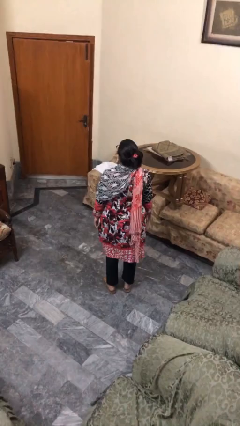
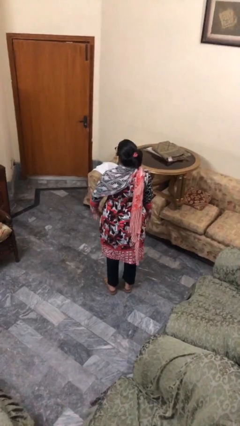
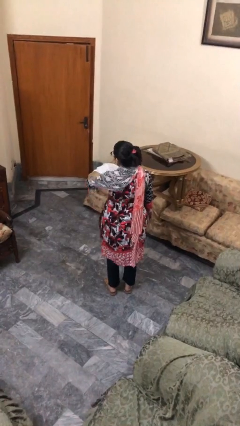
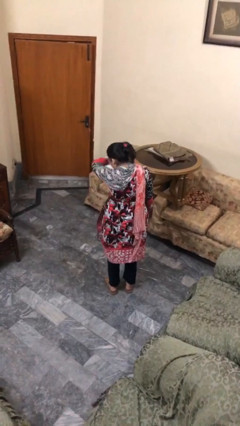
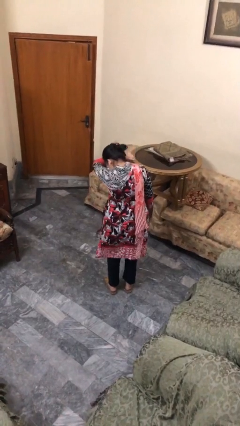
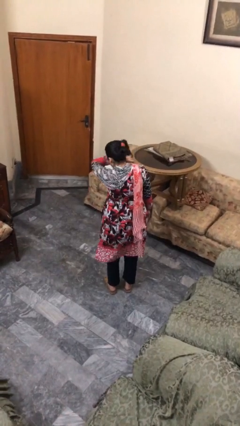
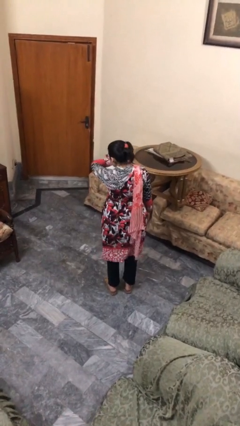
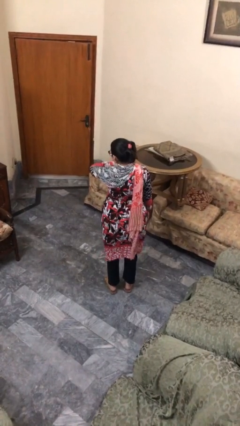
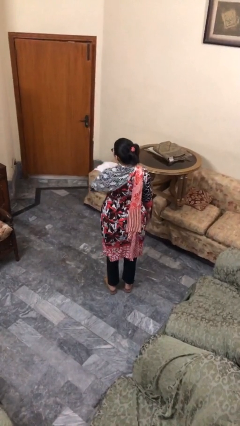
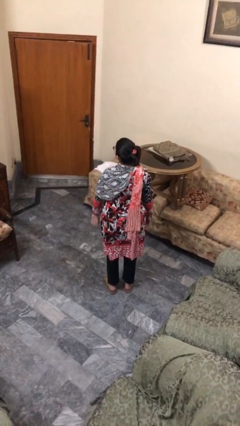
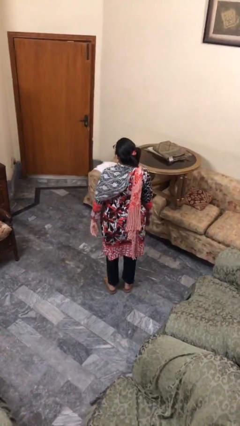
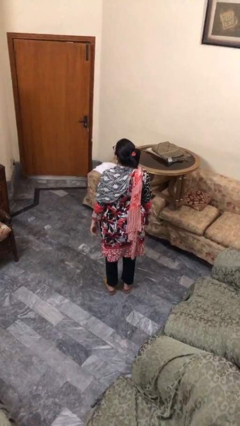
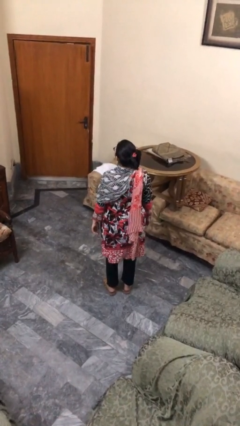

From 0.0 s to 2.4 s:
person sneezes into arm

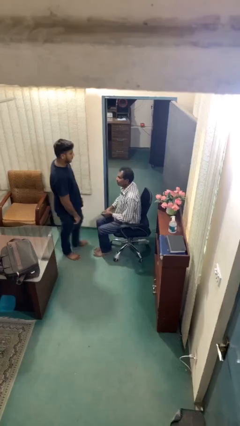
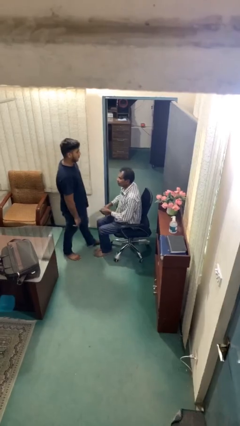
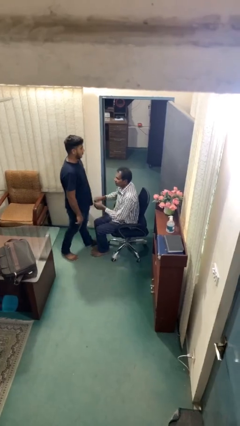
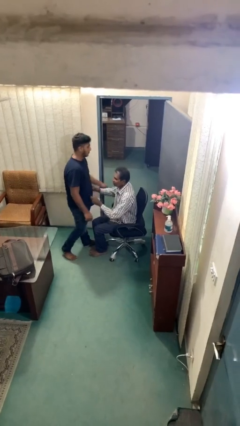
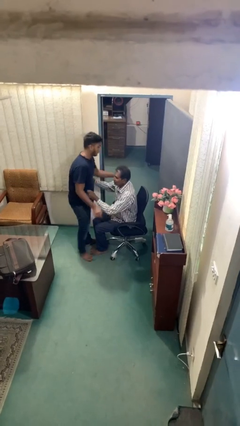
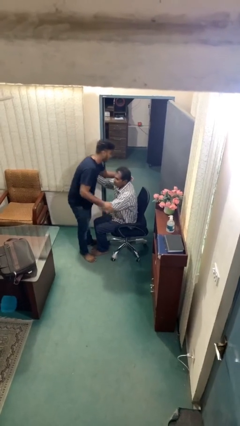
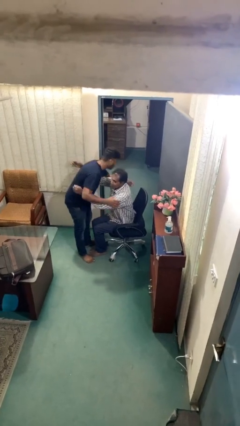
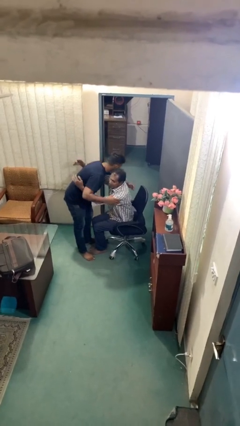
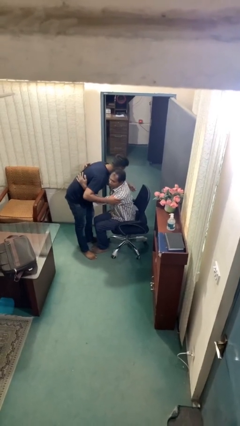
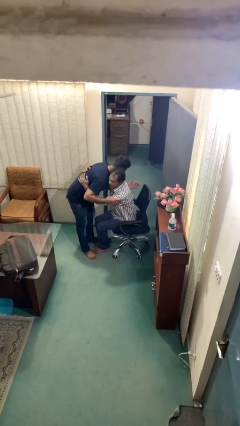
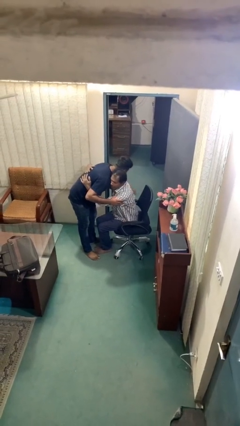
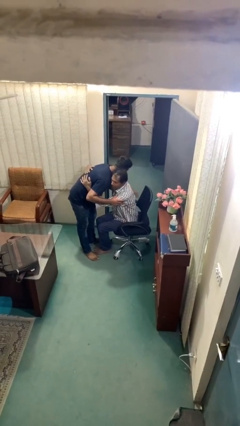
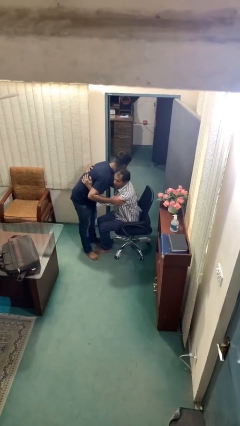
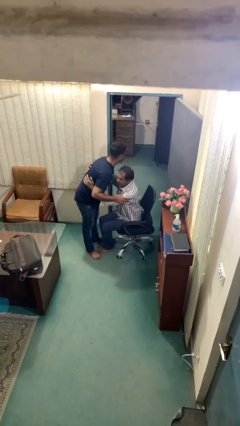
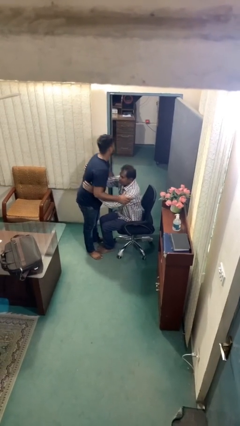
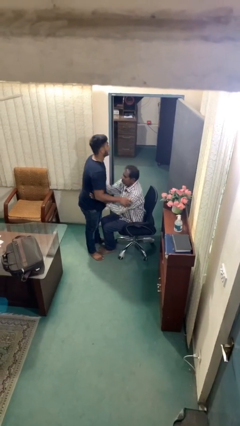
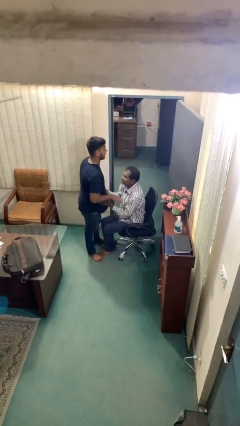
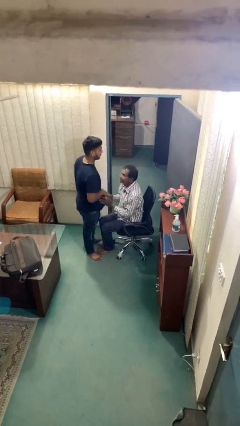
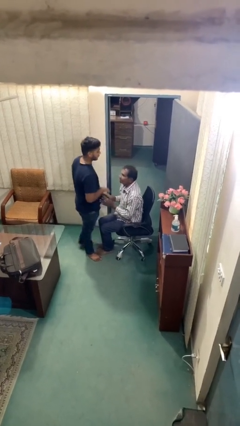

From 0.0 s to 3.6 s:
person embraces person

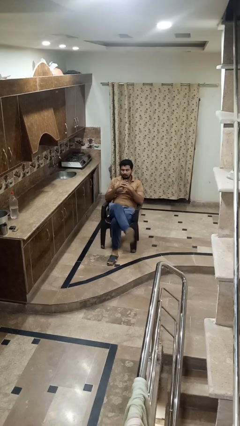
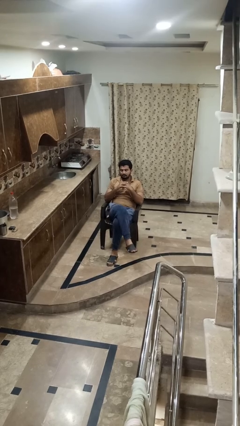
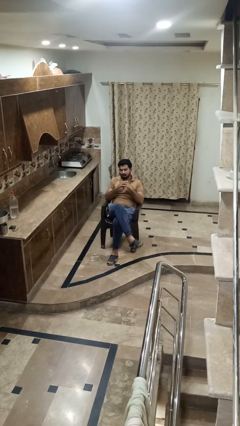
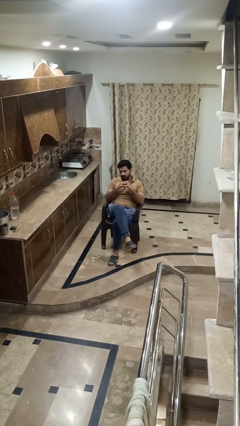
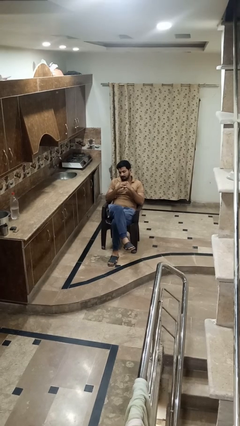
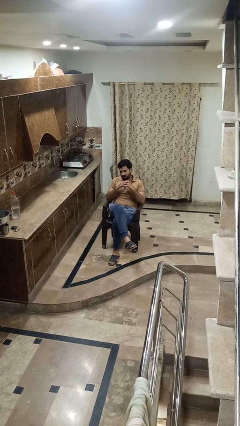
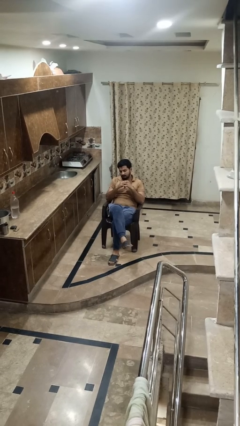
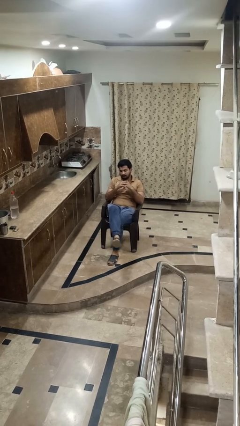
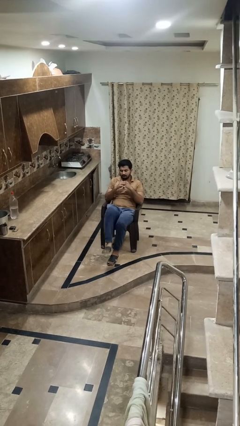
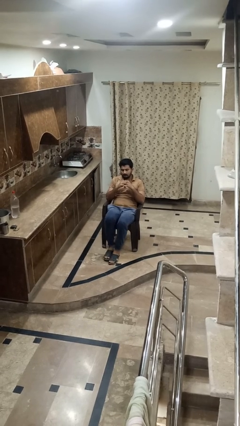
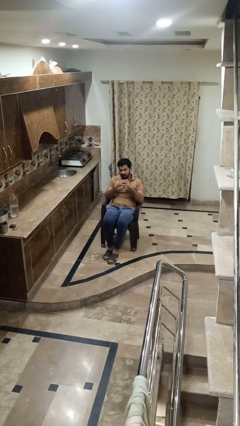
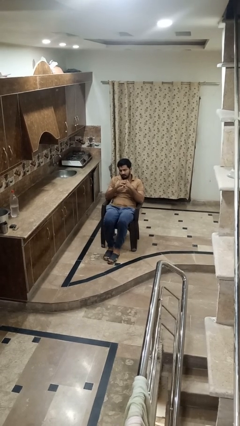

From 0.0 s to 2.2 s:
person crosses legs

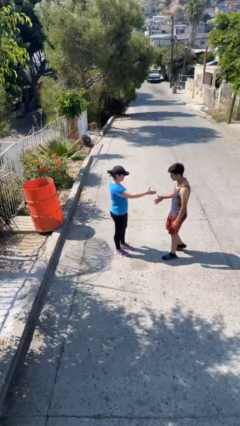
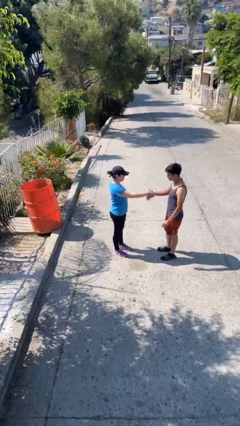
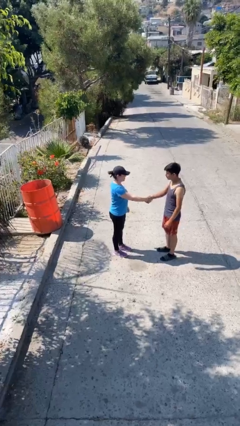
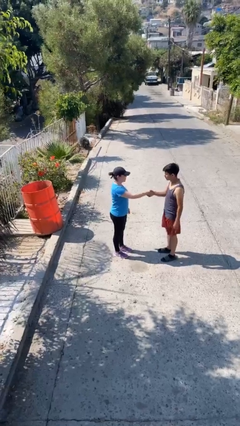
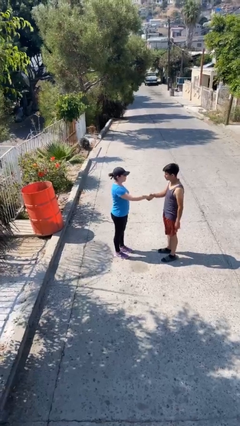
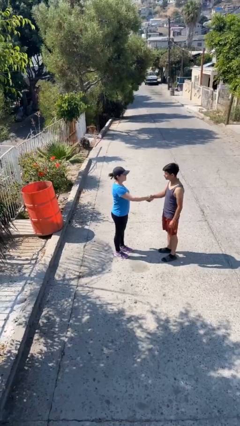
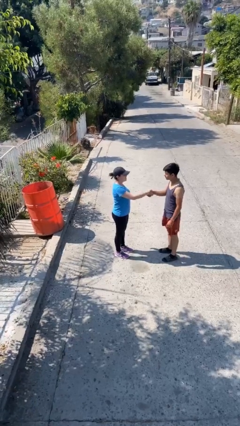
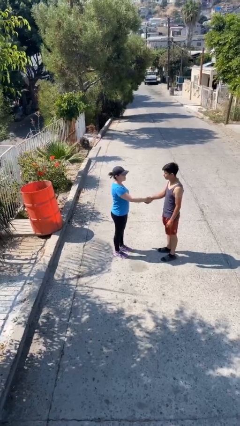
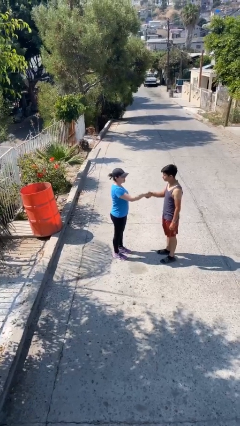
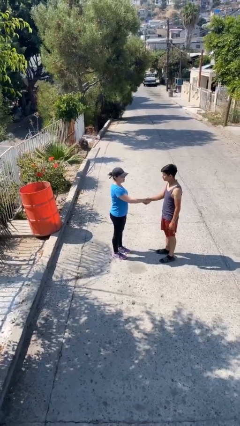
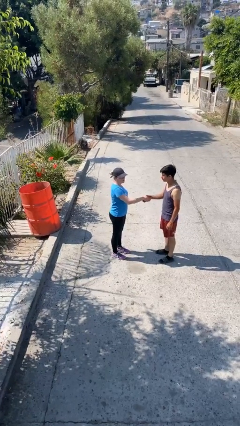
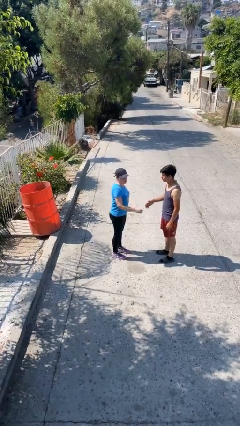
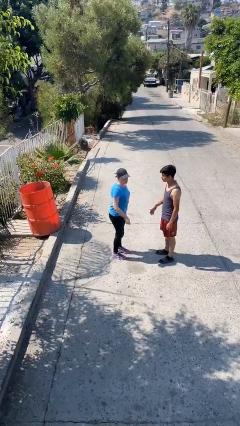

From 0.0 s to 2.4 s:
person shakes hand

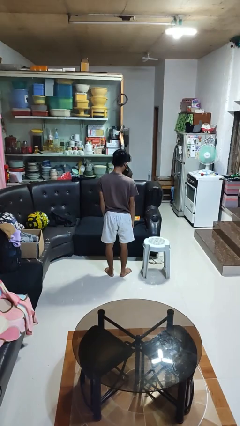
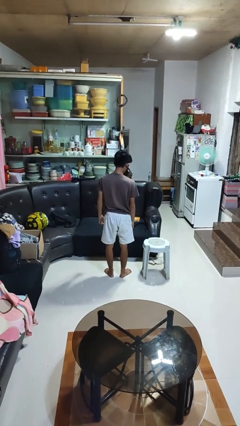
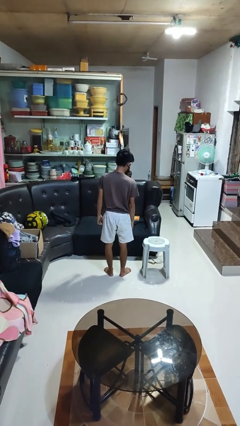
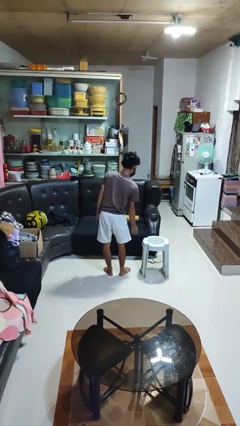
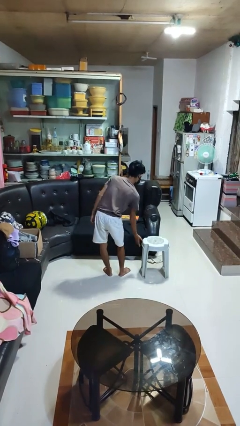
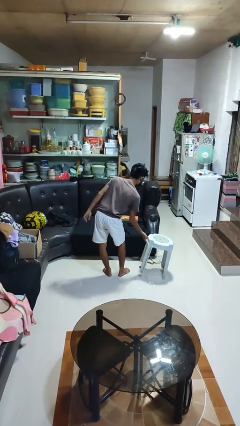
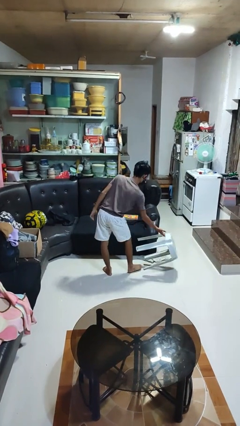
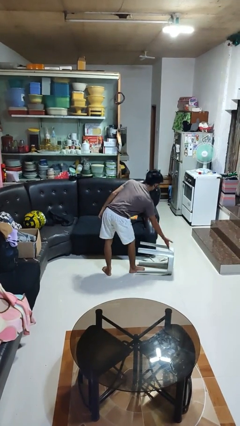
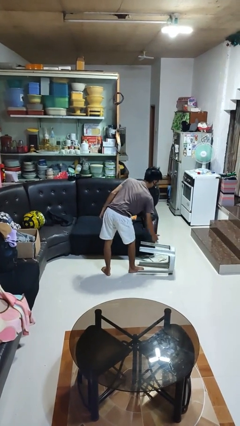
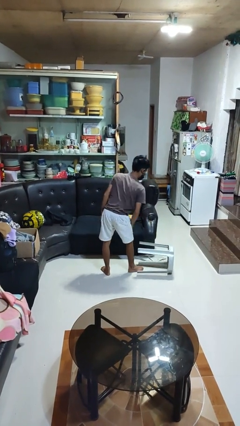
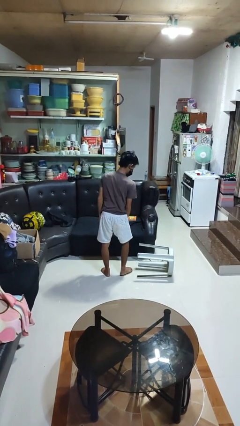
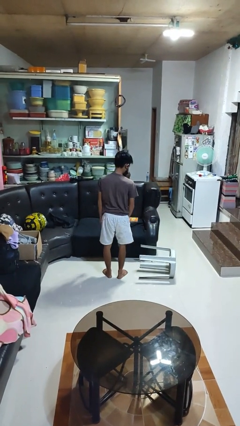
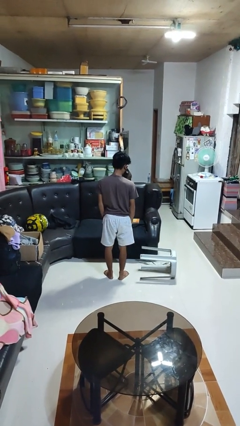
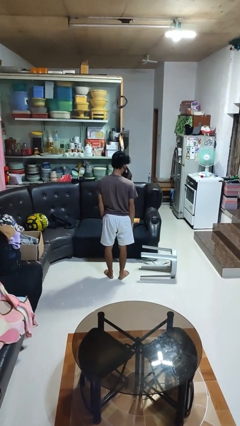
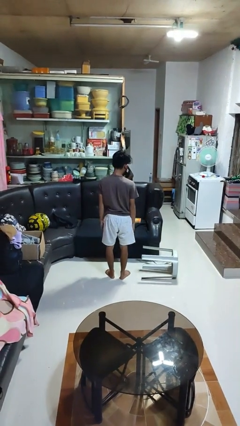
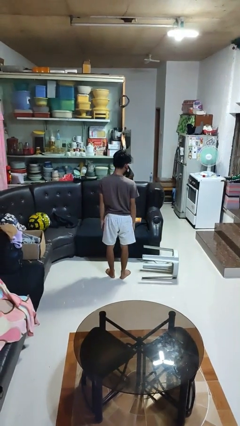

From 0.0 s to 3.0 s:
person knocks over furniture

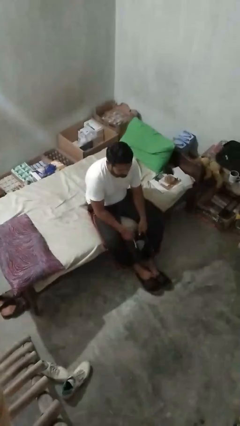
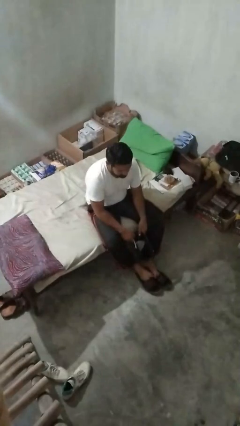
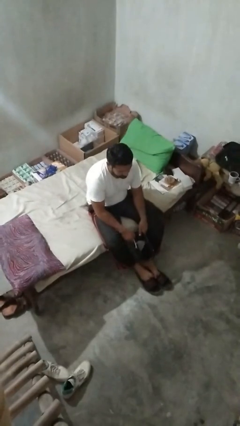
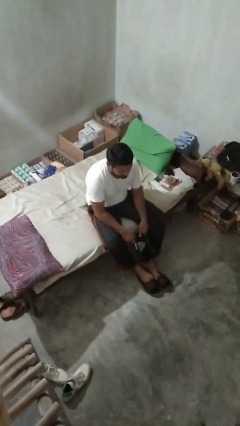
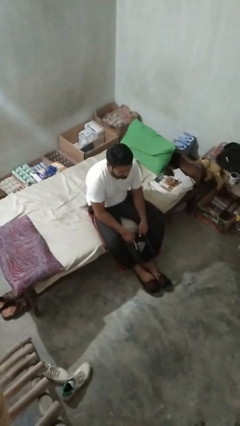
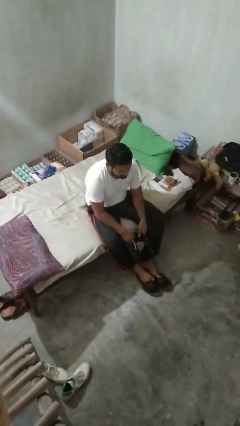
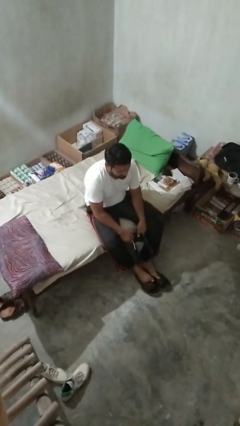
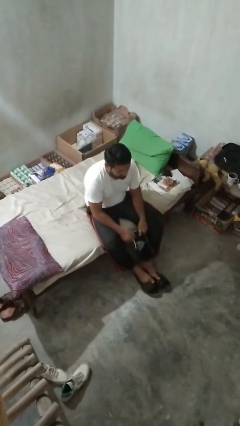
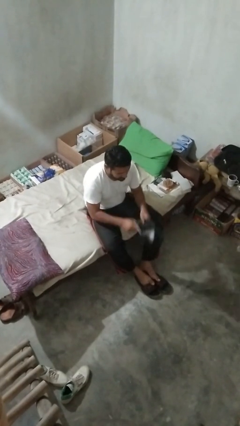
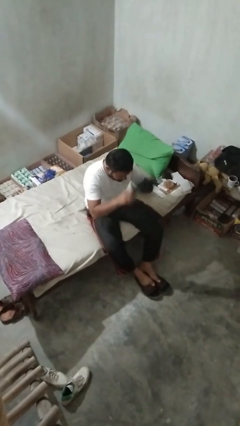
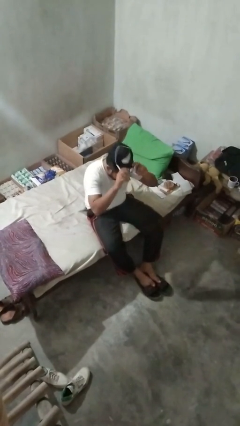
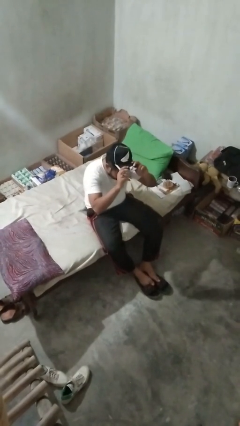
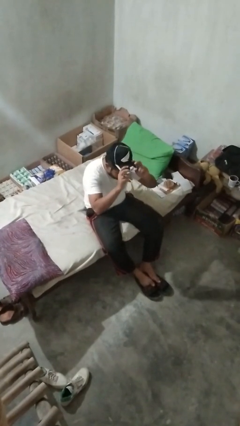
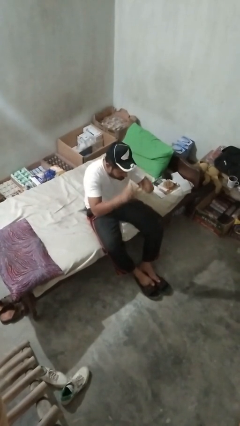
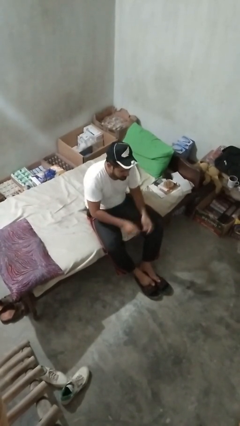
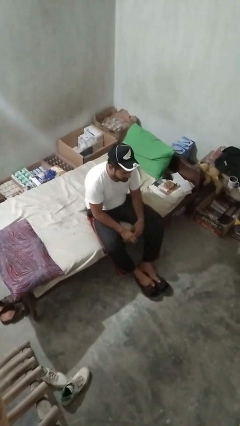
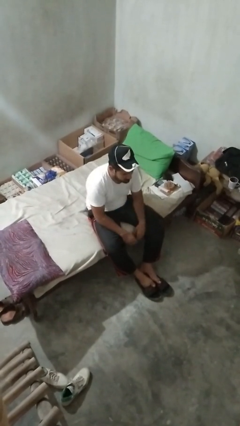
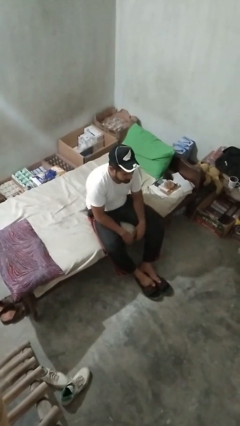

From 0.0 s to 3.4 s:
person puts on hat

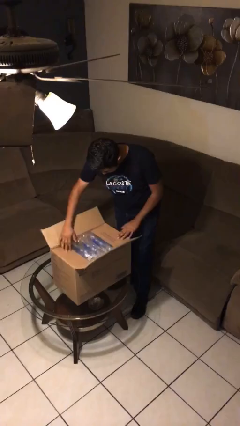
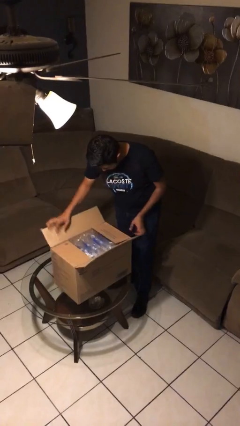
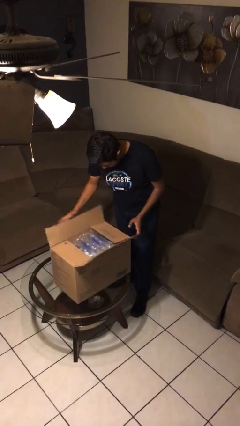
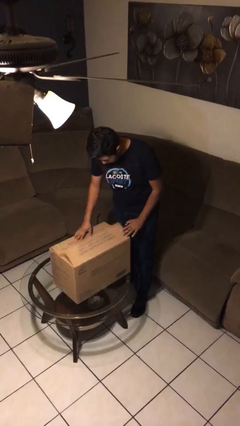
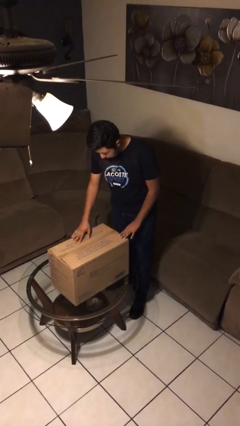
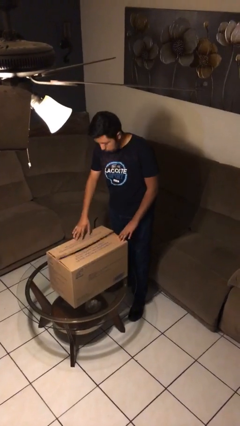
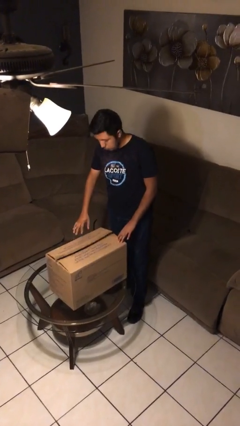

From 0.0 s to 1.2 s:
person closes box
